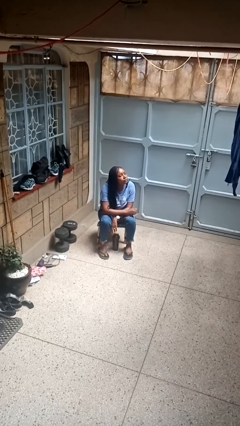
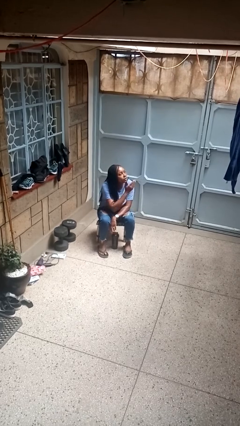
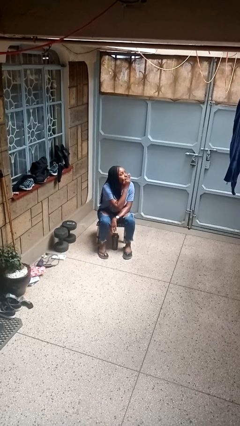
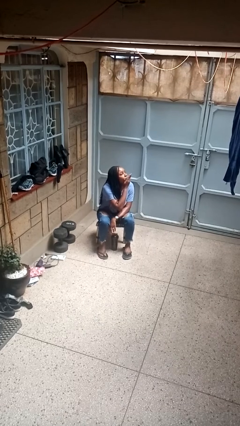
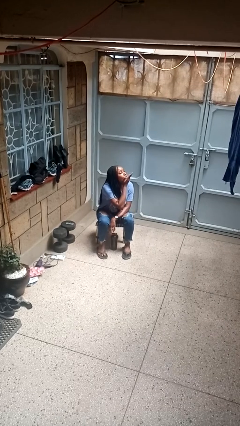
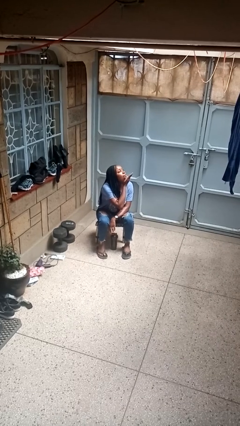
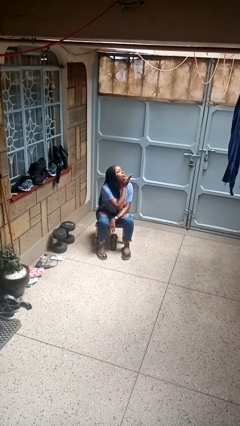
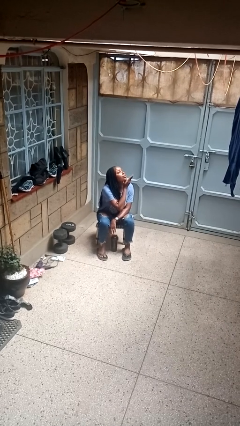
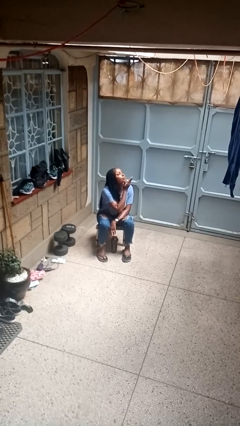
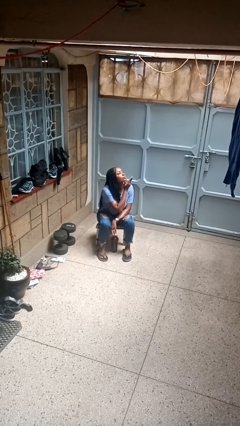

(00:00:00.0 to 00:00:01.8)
person gestures blow kiss

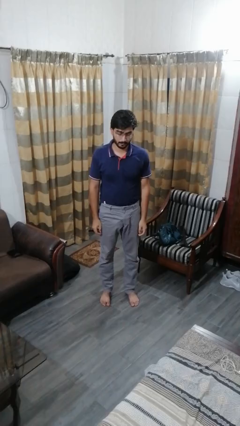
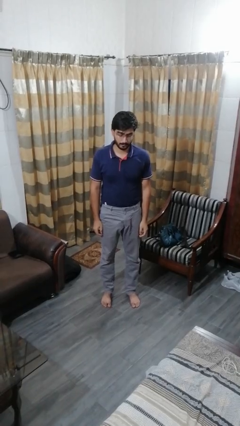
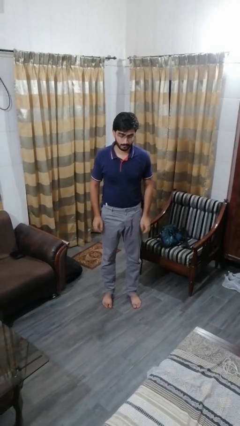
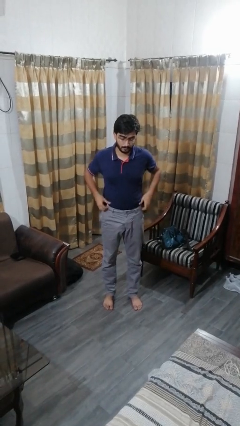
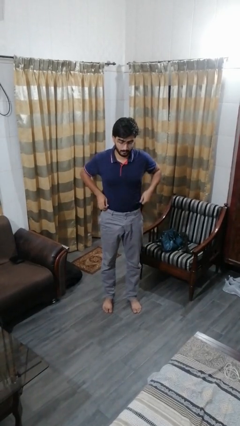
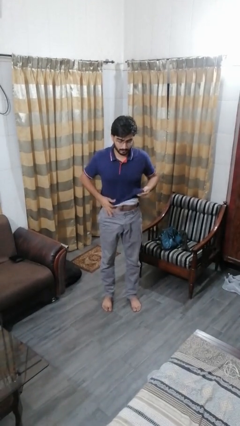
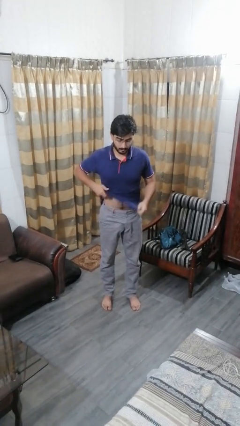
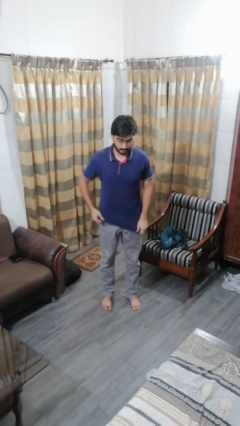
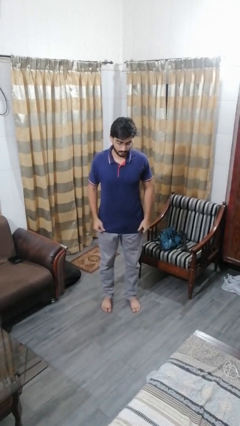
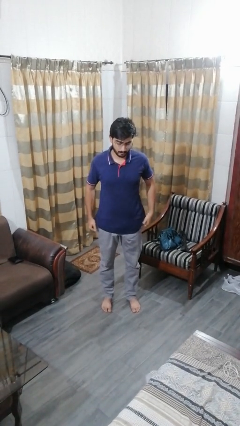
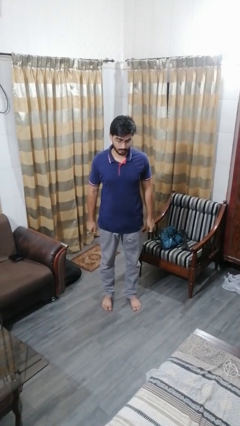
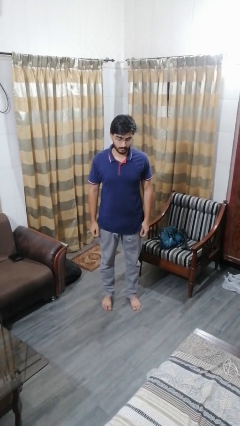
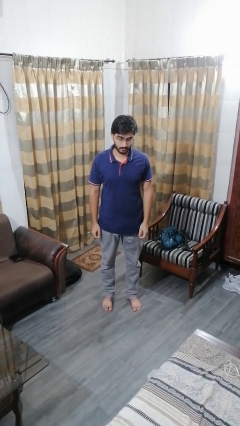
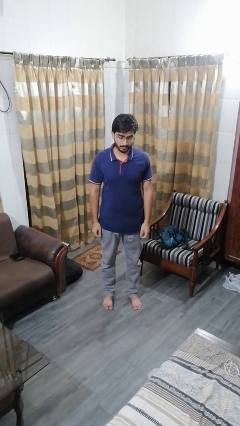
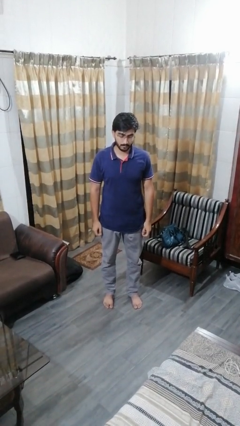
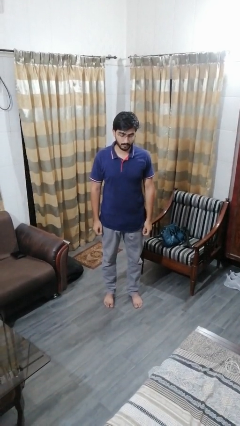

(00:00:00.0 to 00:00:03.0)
person untucks shirt

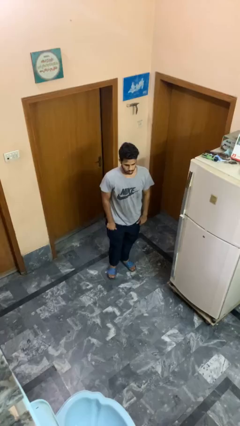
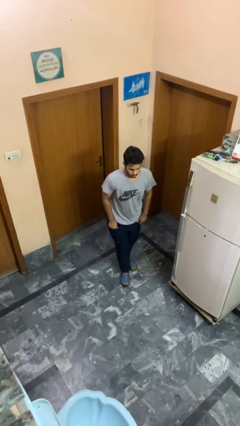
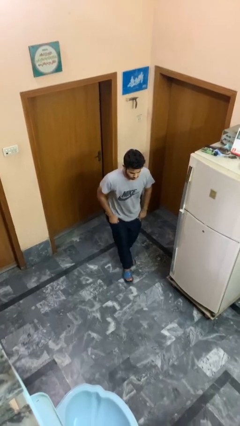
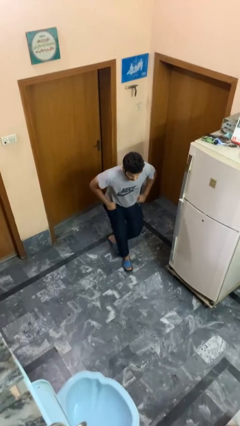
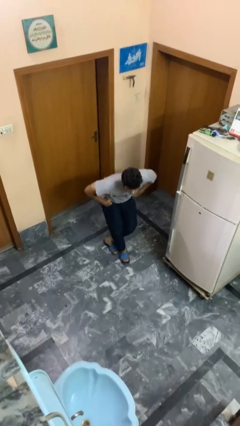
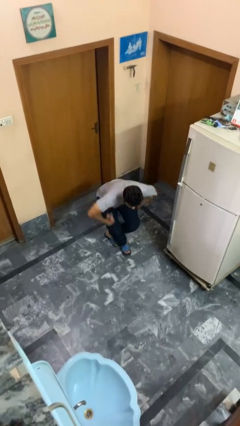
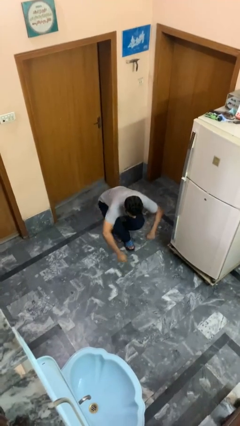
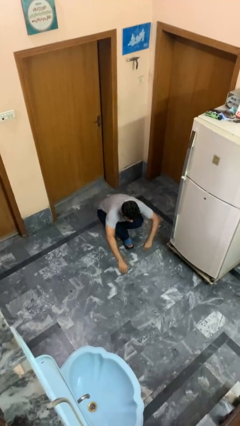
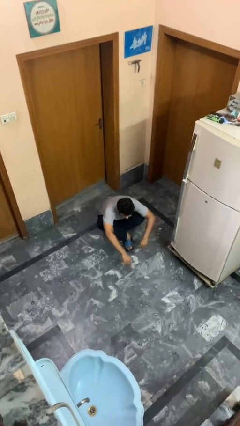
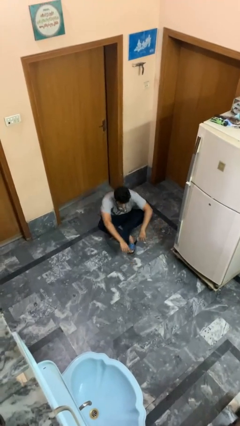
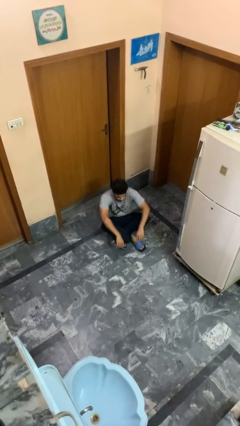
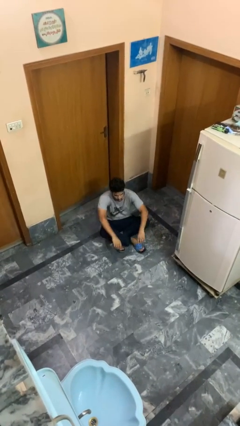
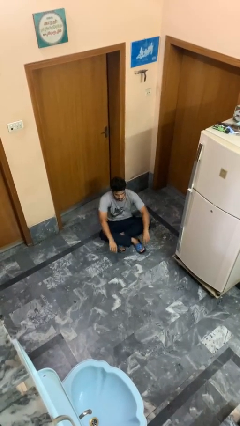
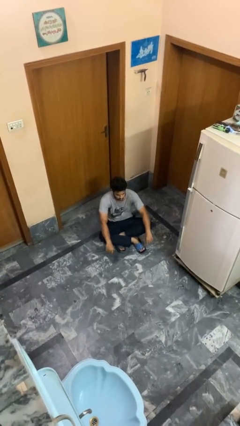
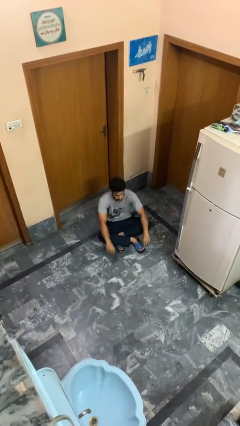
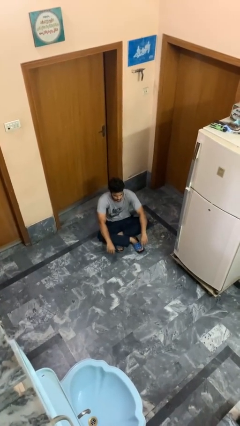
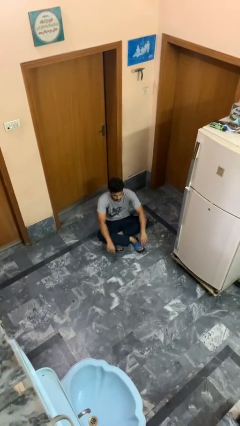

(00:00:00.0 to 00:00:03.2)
person sits crisscross

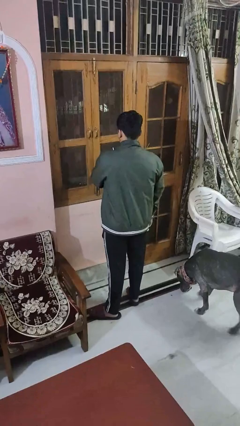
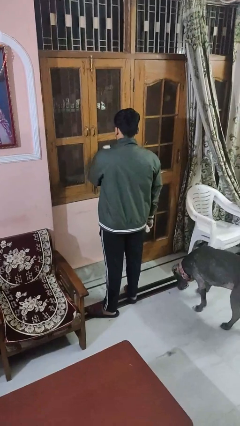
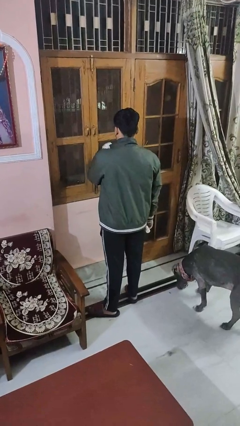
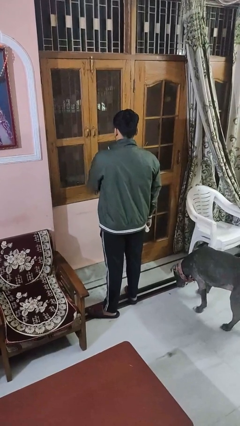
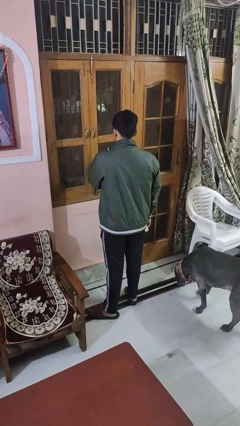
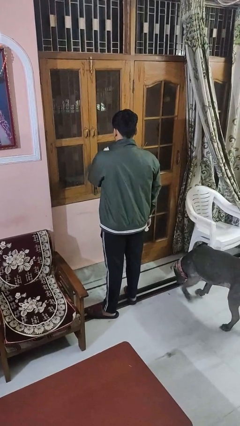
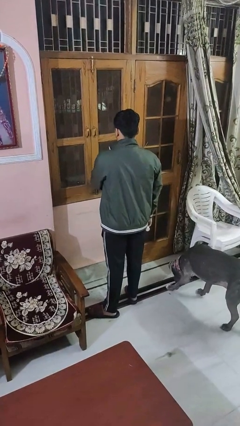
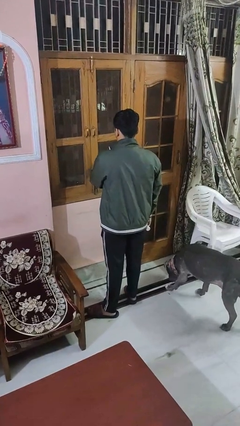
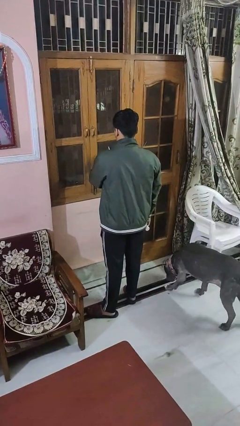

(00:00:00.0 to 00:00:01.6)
person washes window

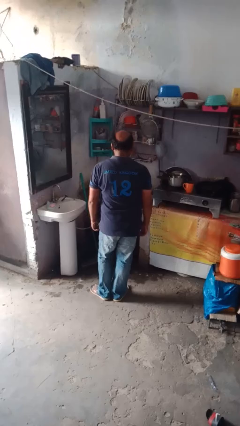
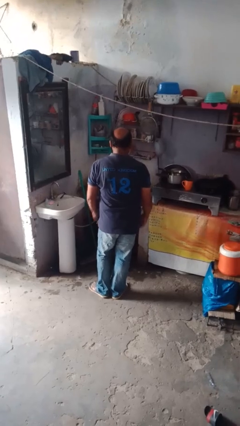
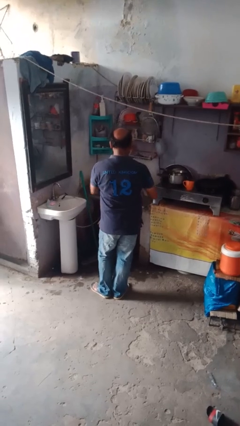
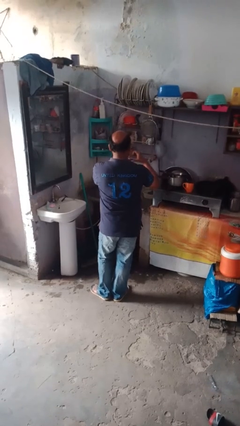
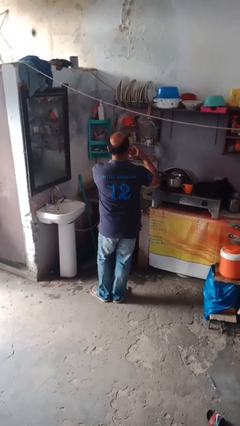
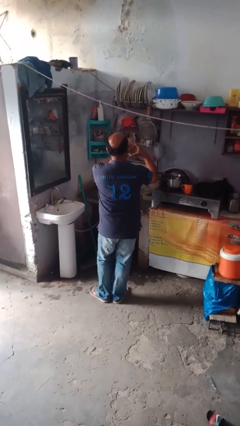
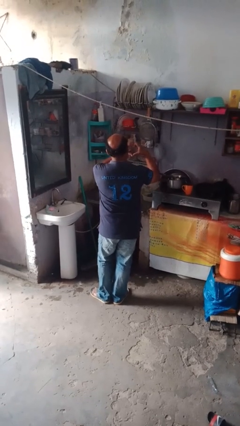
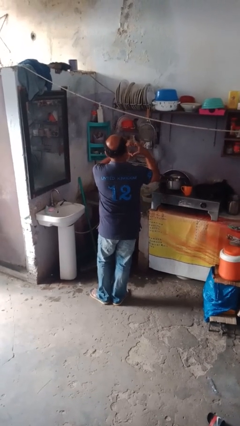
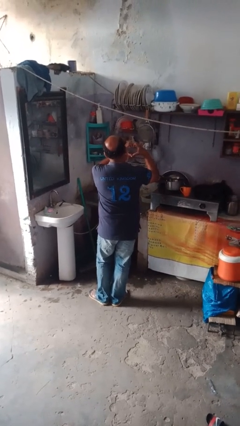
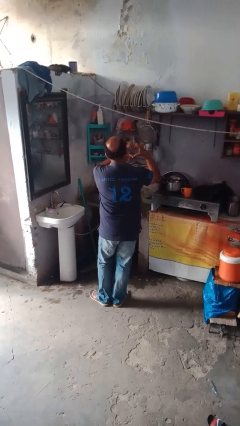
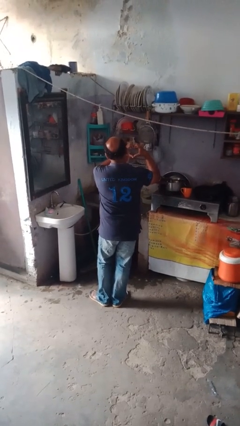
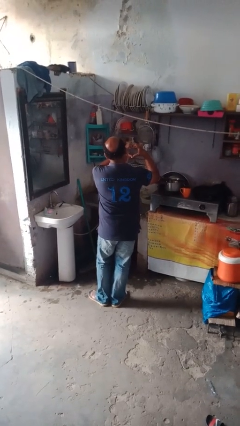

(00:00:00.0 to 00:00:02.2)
person gestures heart

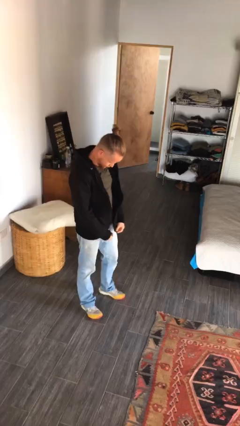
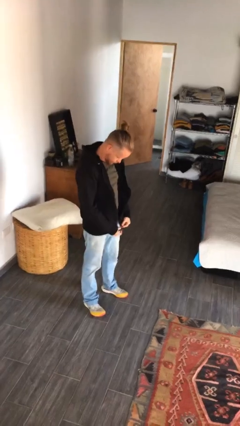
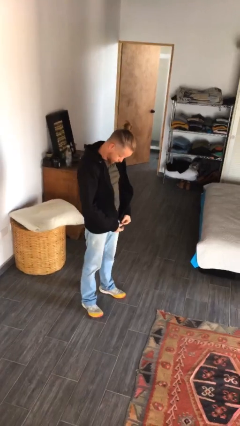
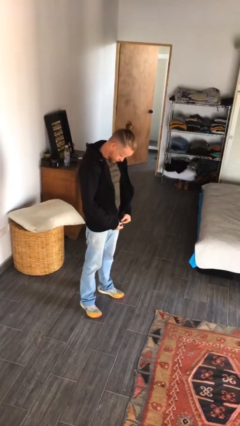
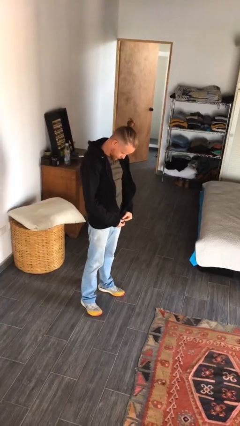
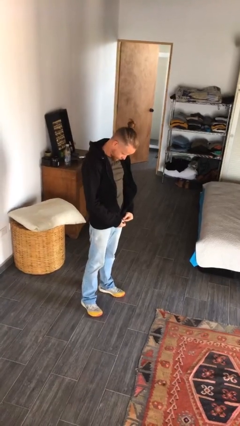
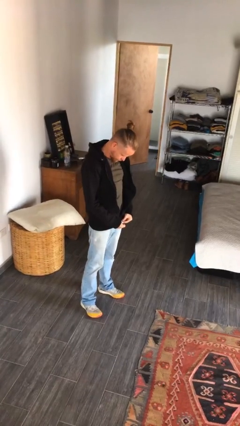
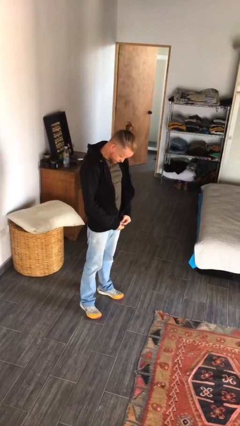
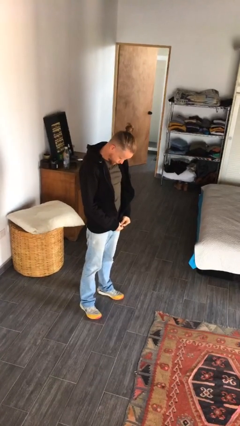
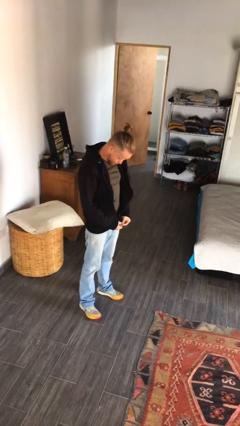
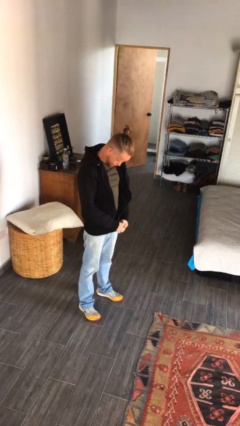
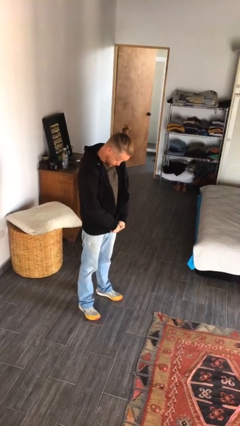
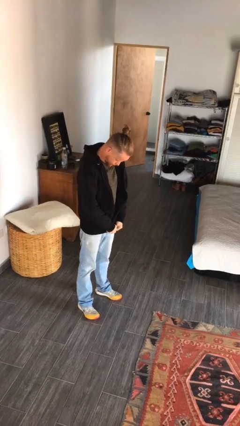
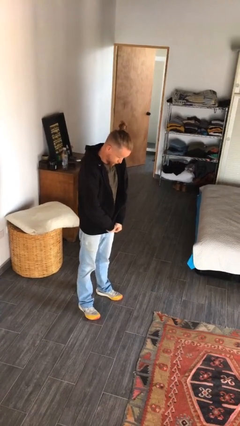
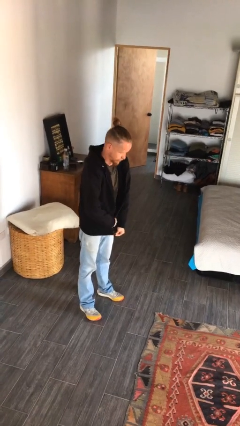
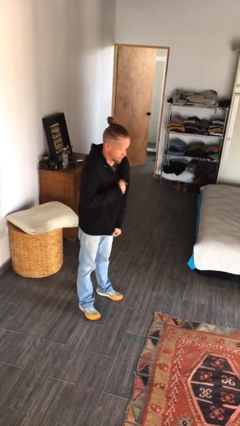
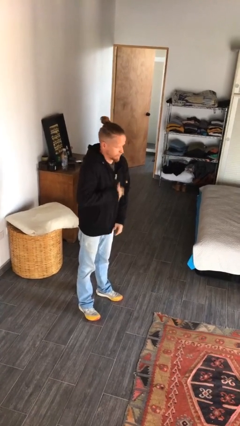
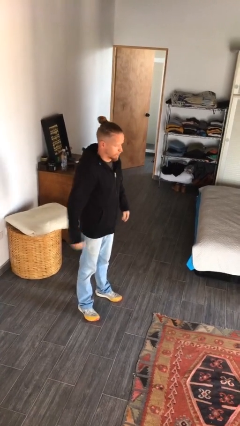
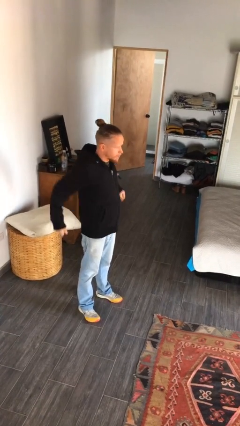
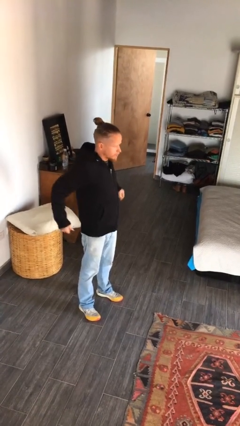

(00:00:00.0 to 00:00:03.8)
person zips up jacket

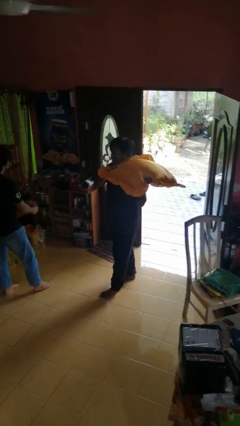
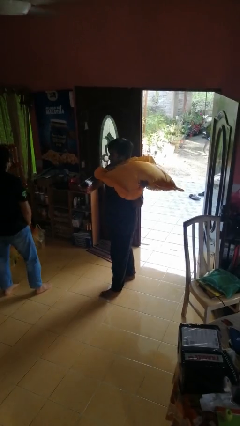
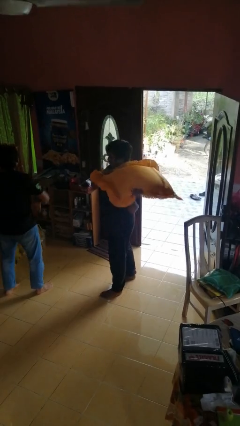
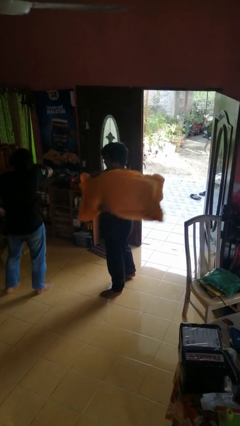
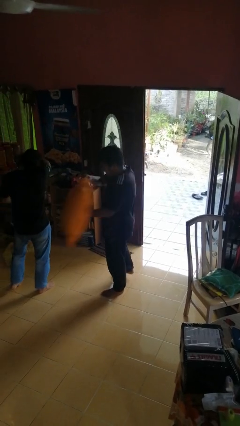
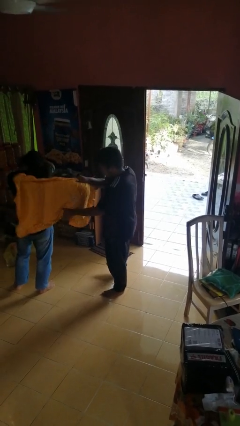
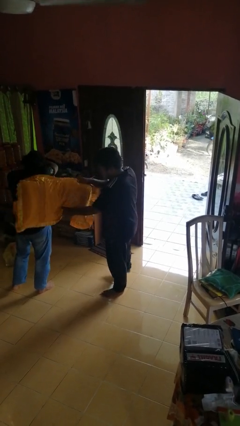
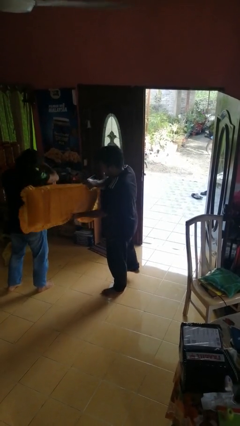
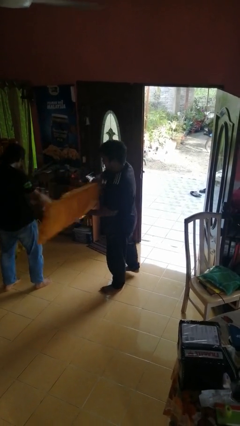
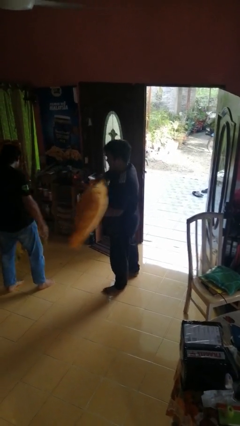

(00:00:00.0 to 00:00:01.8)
person hits person with pillow
